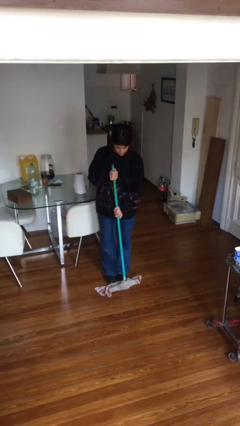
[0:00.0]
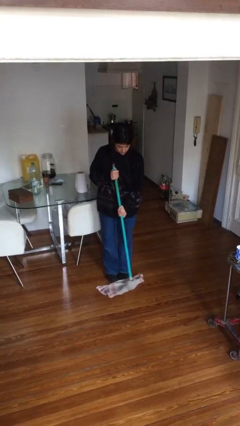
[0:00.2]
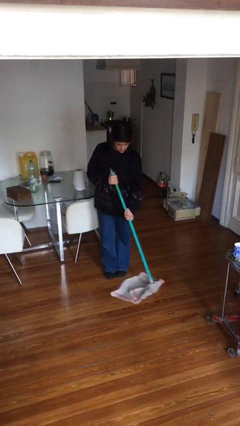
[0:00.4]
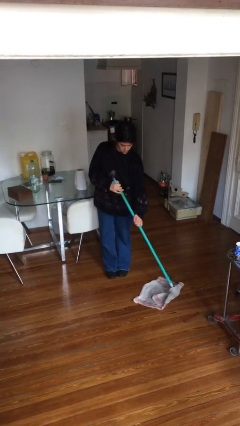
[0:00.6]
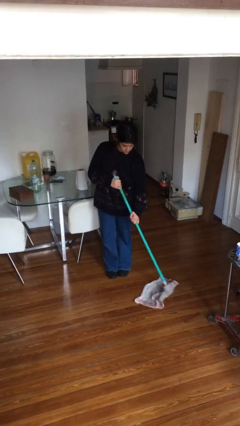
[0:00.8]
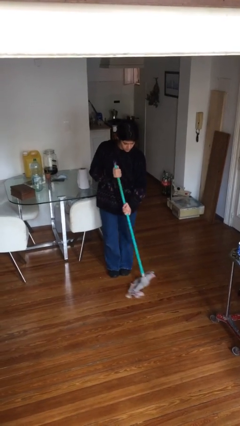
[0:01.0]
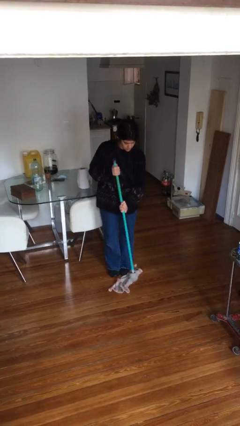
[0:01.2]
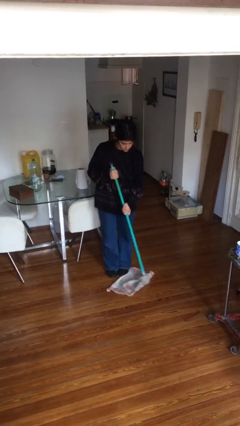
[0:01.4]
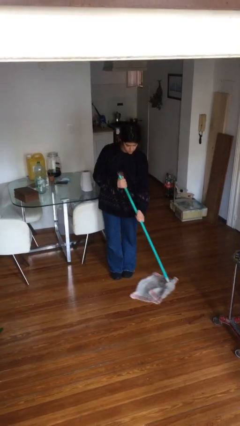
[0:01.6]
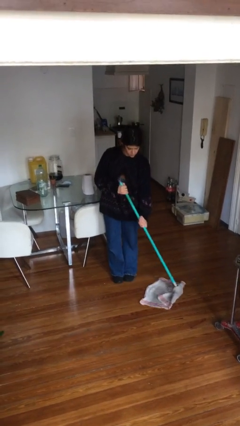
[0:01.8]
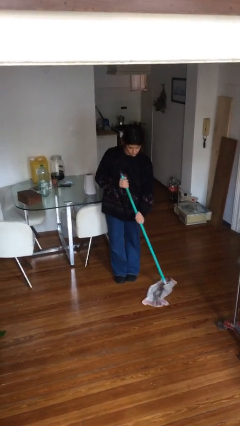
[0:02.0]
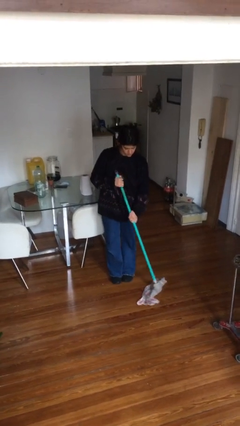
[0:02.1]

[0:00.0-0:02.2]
person mops

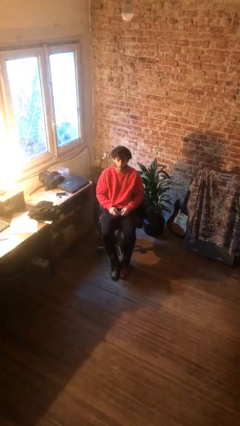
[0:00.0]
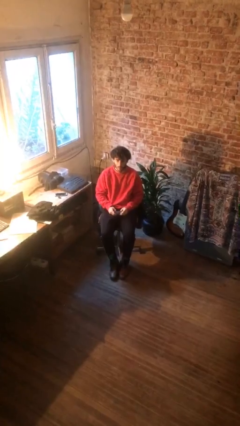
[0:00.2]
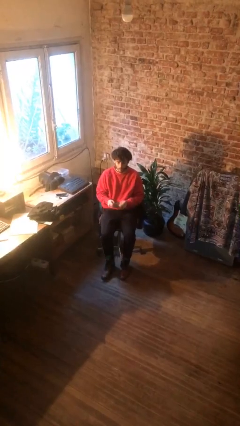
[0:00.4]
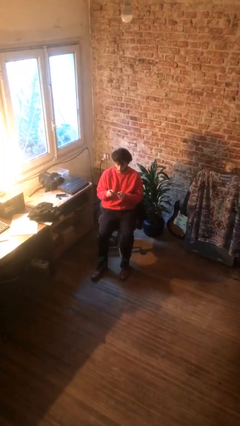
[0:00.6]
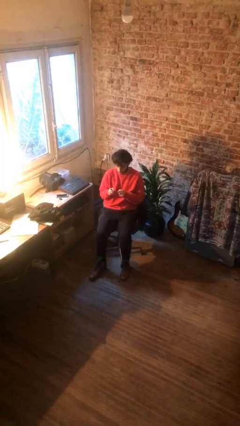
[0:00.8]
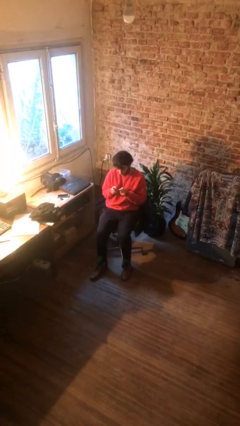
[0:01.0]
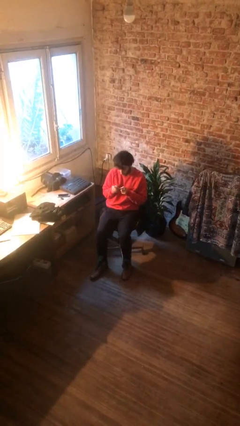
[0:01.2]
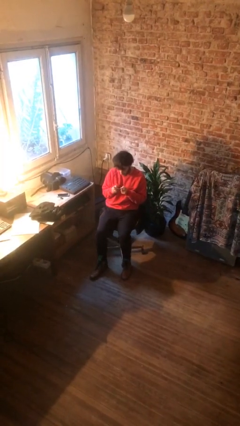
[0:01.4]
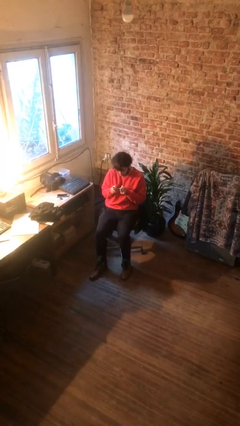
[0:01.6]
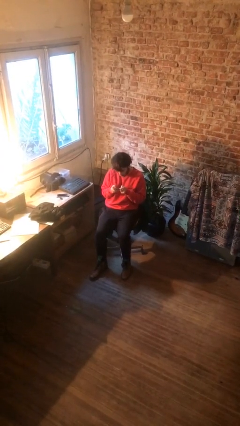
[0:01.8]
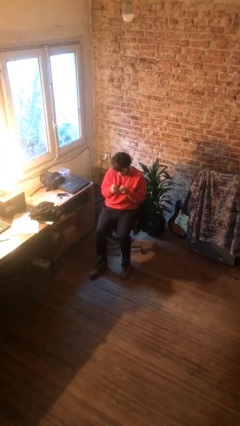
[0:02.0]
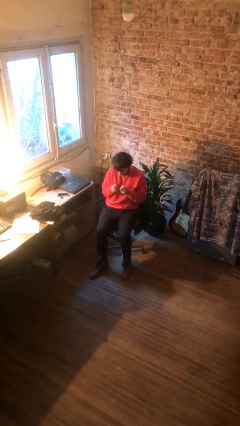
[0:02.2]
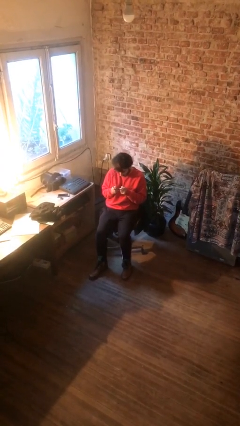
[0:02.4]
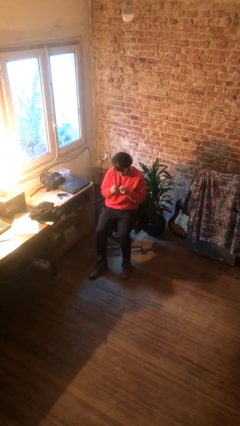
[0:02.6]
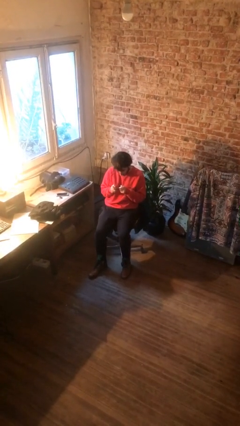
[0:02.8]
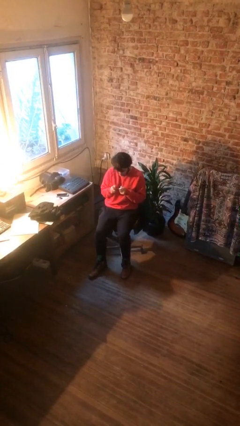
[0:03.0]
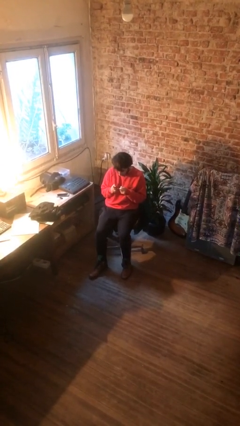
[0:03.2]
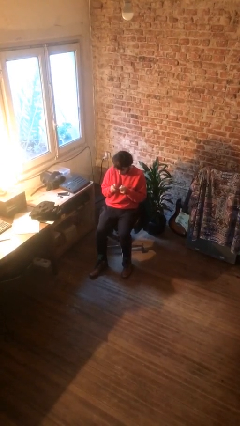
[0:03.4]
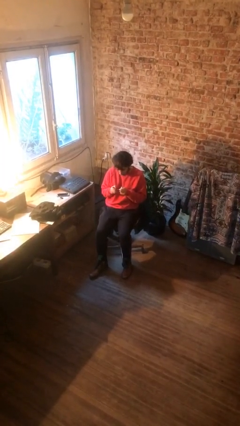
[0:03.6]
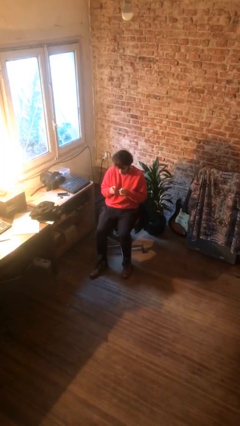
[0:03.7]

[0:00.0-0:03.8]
person interacts with handheld game

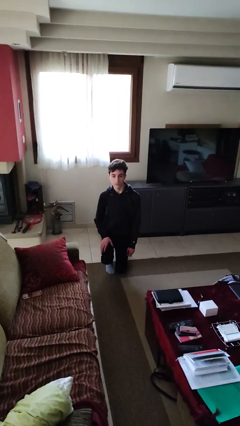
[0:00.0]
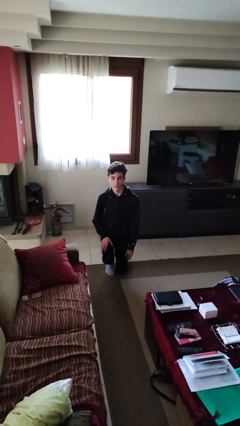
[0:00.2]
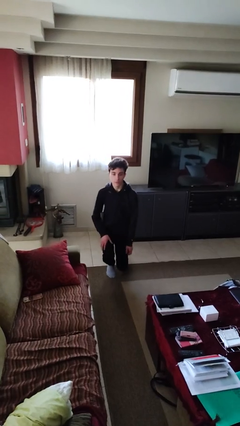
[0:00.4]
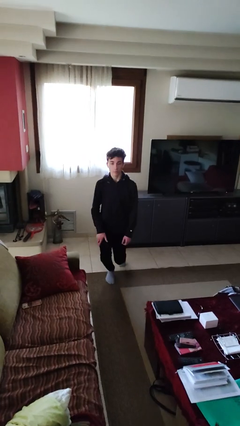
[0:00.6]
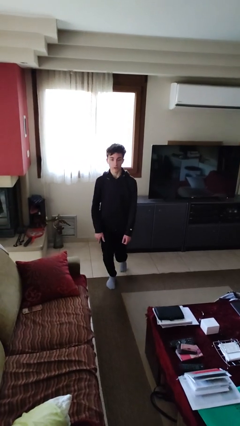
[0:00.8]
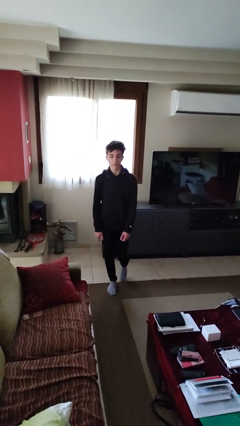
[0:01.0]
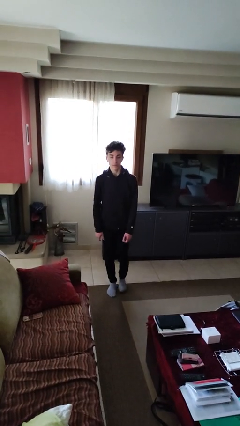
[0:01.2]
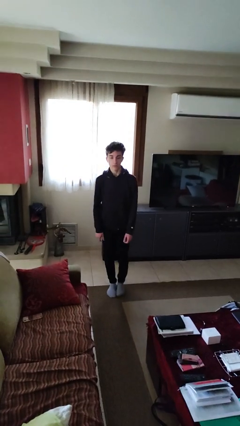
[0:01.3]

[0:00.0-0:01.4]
person stands up from floor

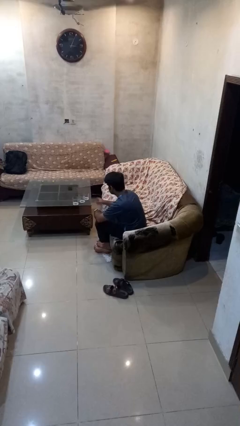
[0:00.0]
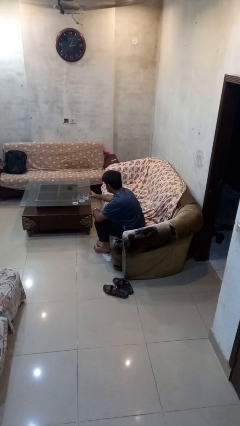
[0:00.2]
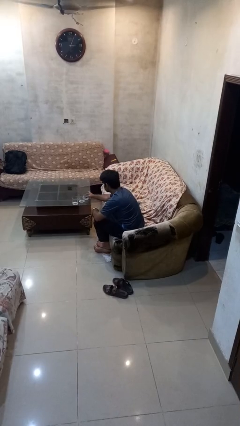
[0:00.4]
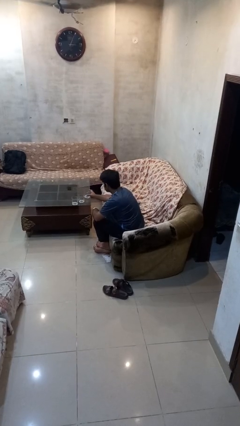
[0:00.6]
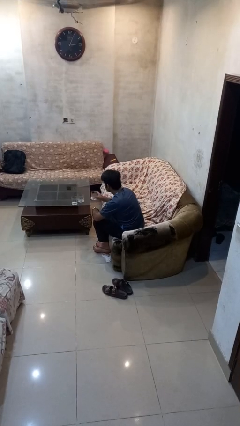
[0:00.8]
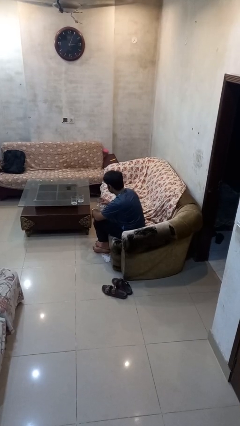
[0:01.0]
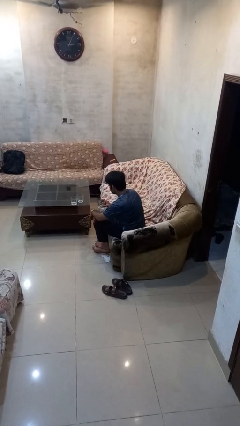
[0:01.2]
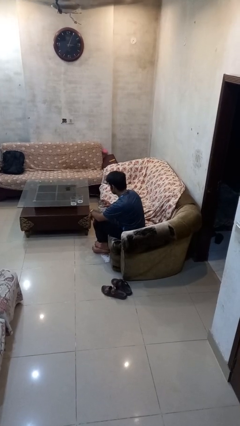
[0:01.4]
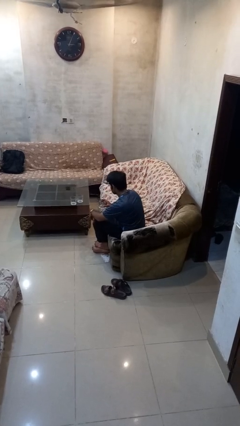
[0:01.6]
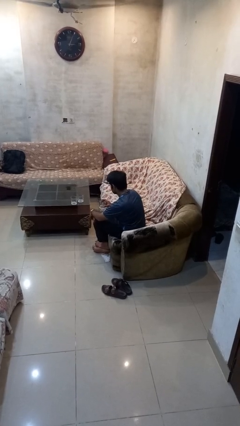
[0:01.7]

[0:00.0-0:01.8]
person picks up object from table

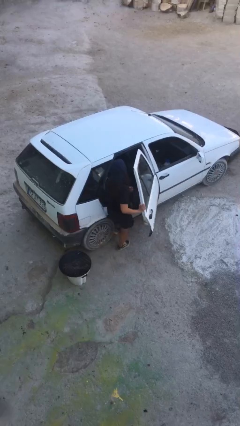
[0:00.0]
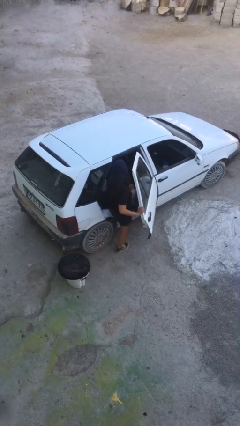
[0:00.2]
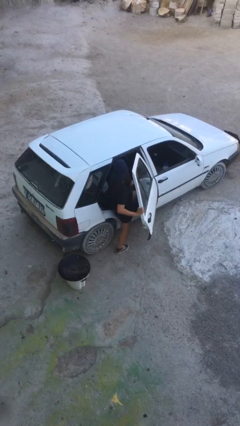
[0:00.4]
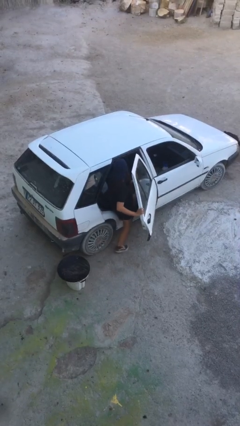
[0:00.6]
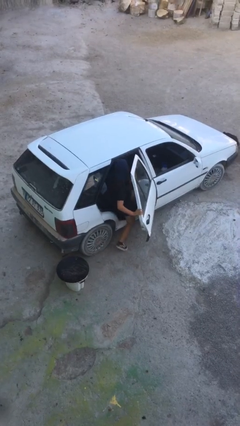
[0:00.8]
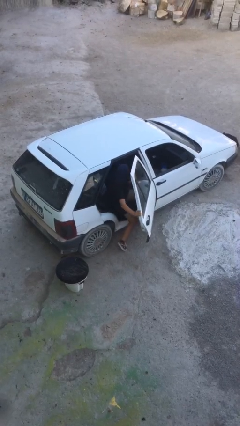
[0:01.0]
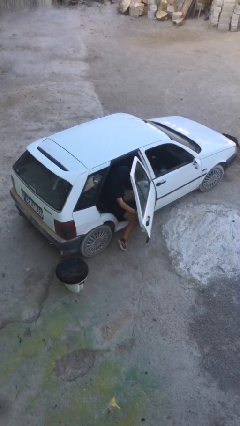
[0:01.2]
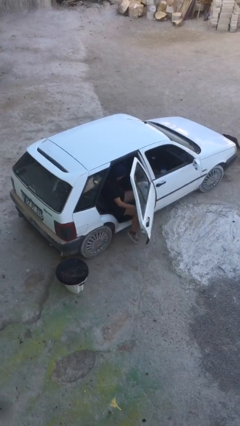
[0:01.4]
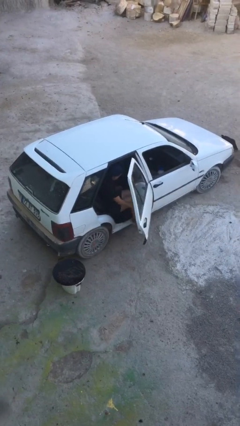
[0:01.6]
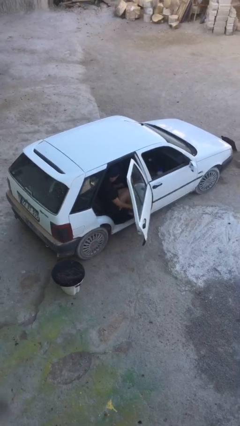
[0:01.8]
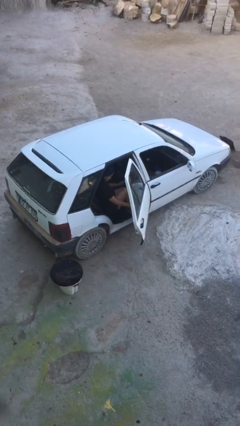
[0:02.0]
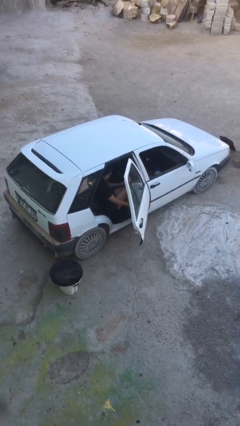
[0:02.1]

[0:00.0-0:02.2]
person enters car

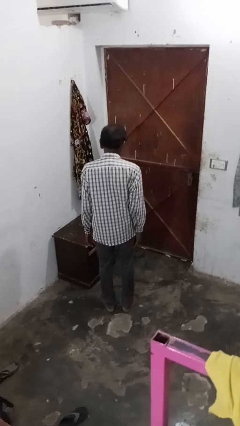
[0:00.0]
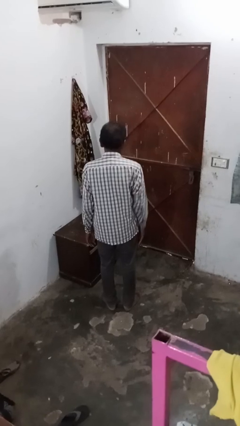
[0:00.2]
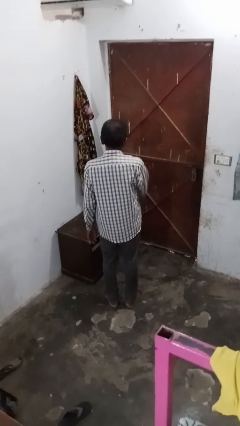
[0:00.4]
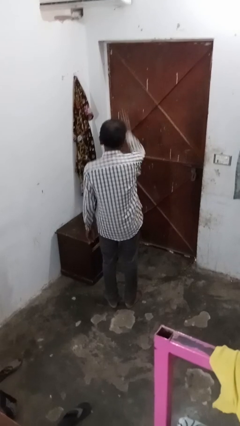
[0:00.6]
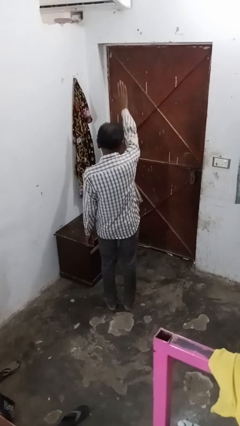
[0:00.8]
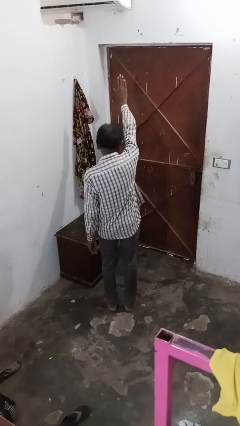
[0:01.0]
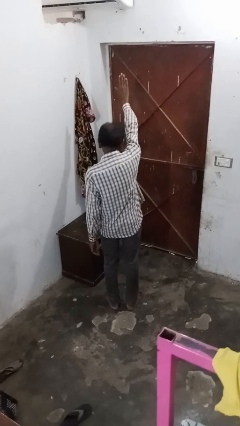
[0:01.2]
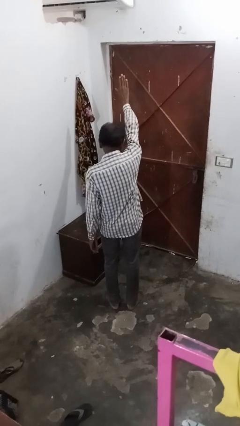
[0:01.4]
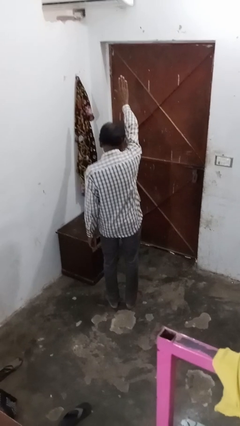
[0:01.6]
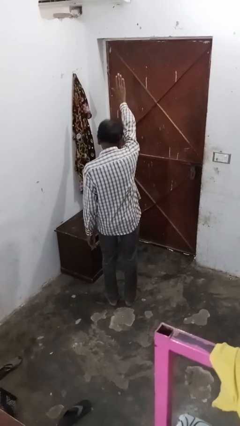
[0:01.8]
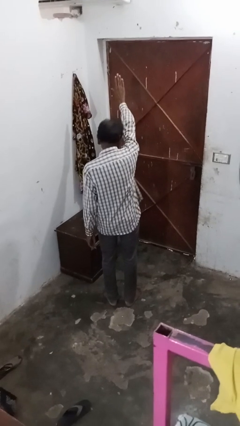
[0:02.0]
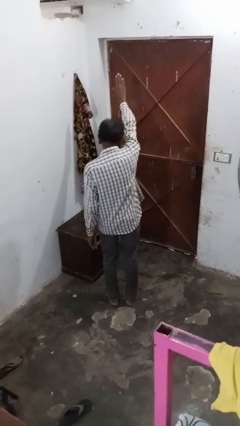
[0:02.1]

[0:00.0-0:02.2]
person gestures stop

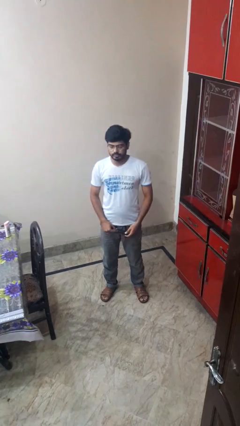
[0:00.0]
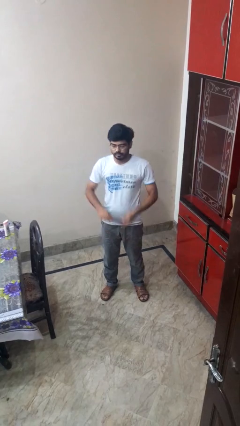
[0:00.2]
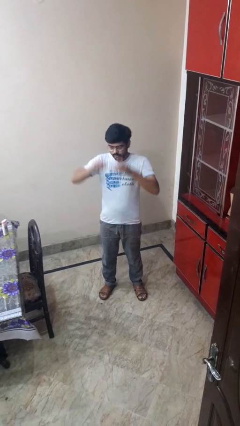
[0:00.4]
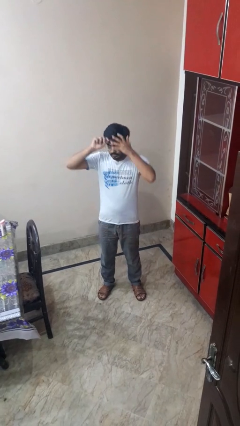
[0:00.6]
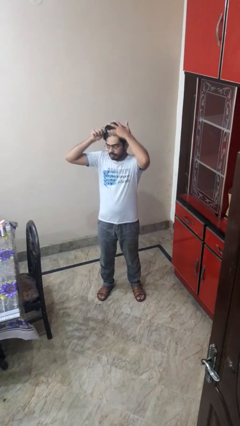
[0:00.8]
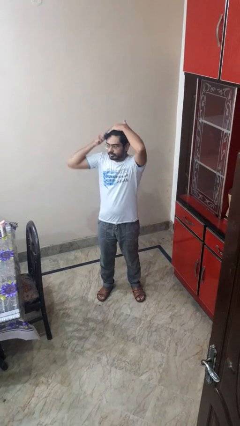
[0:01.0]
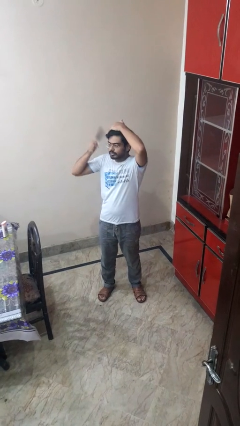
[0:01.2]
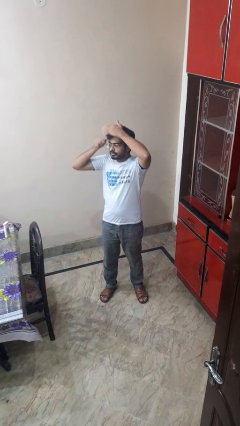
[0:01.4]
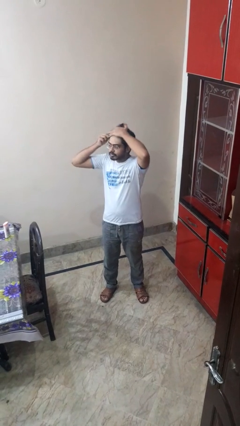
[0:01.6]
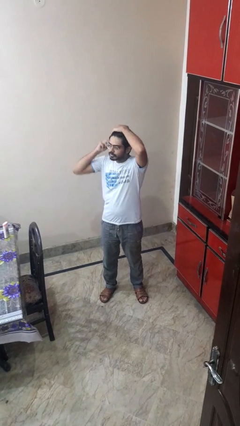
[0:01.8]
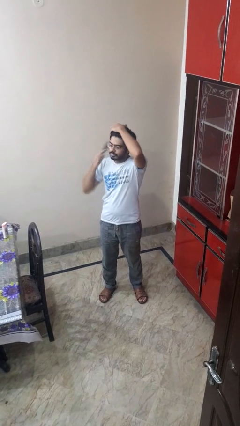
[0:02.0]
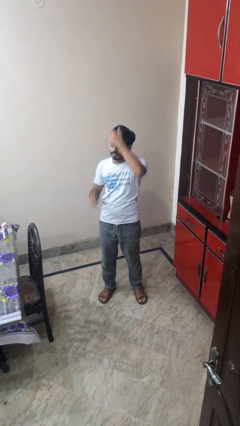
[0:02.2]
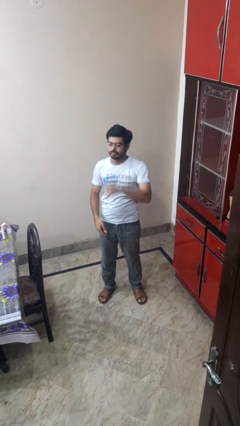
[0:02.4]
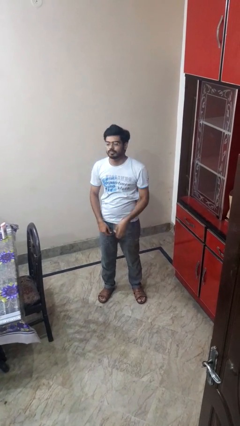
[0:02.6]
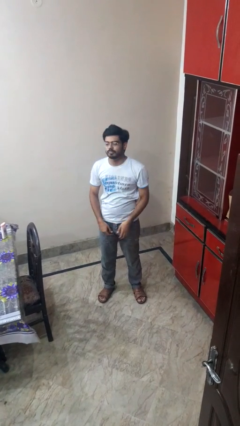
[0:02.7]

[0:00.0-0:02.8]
person brushes hair

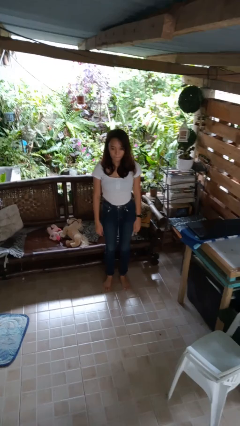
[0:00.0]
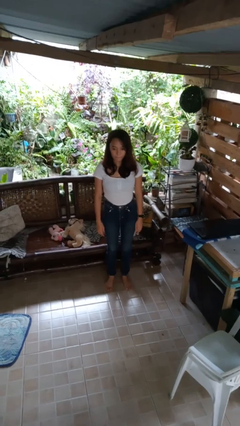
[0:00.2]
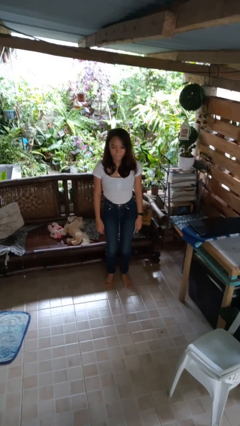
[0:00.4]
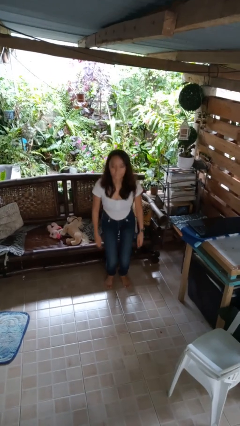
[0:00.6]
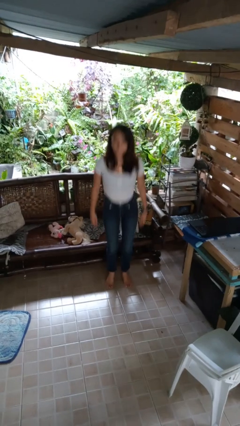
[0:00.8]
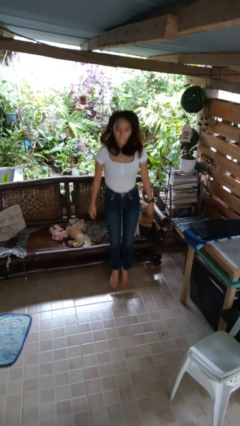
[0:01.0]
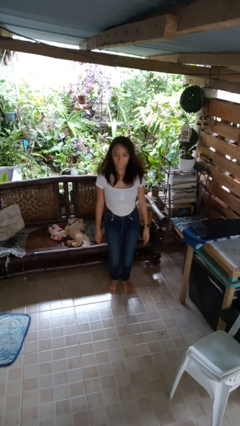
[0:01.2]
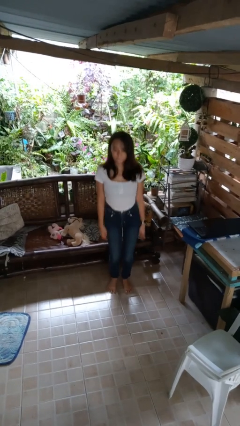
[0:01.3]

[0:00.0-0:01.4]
person jumps
